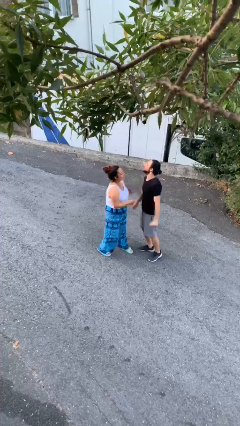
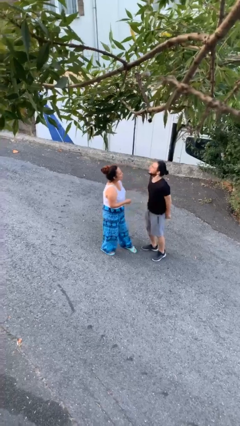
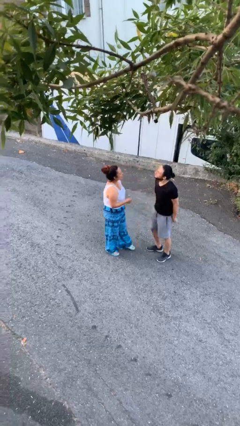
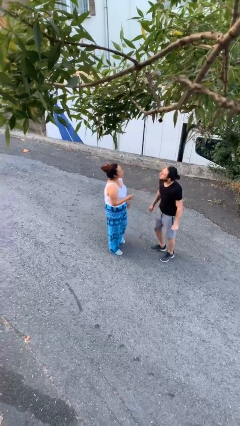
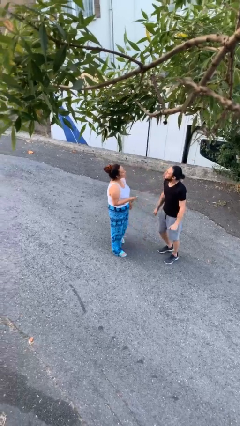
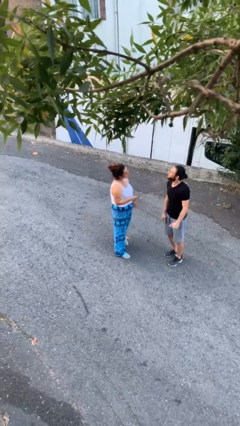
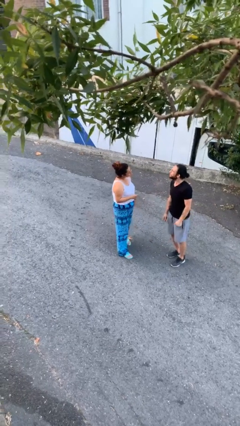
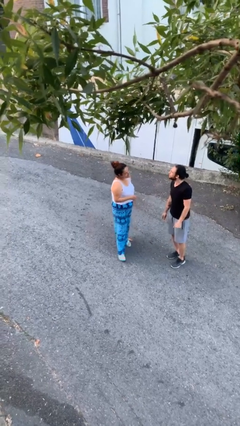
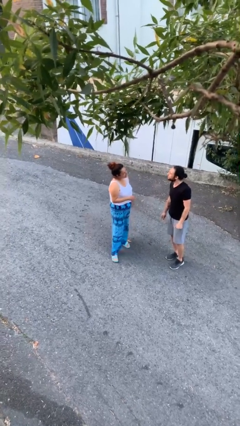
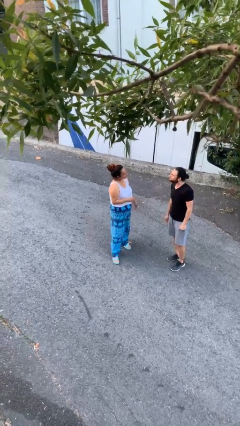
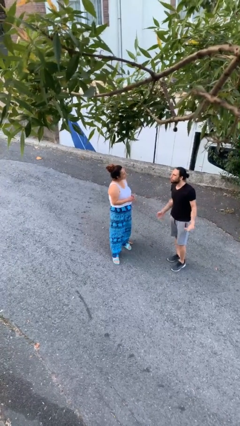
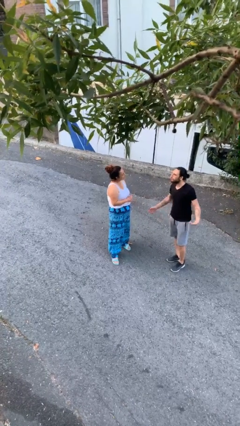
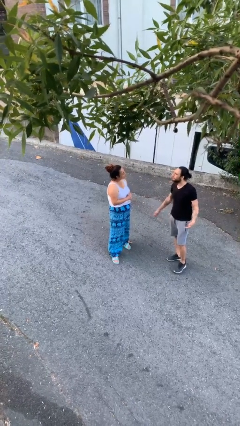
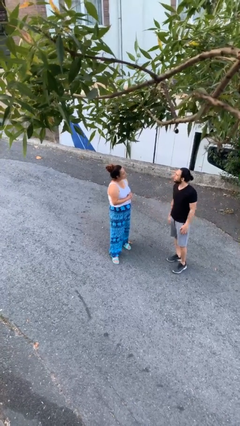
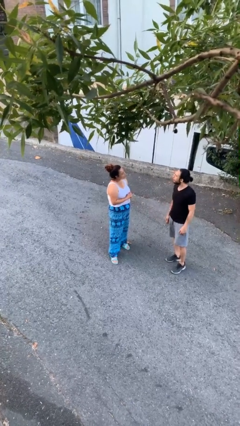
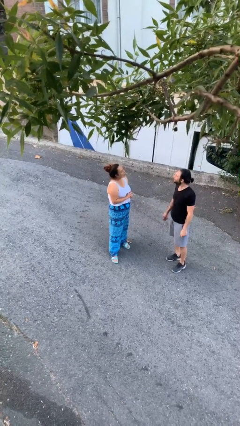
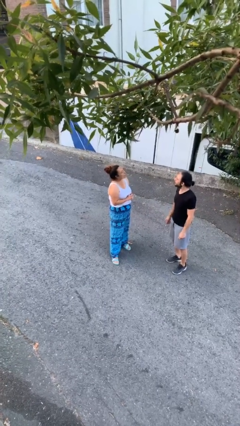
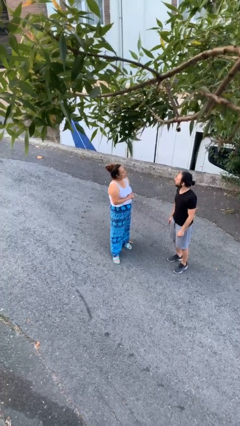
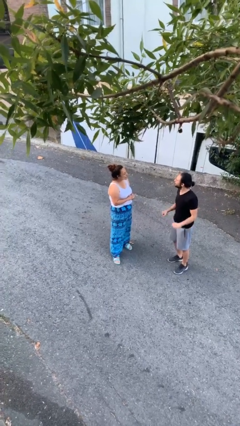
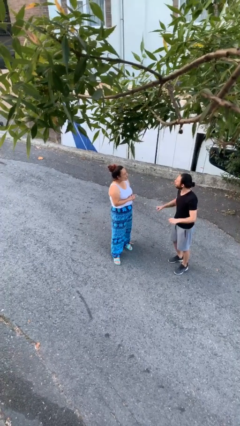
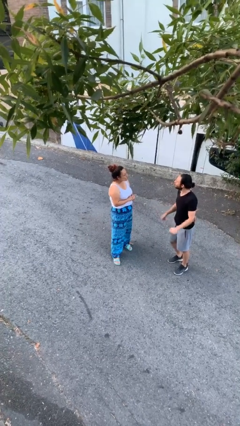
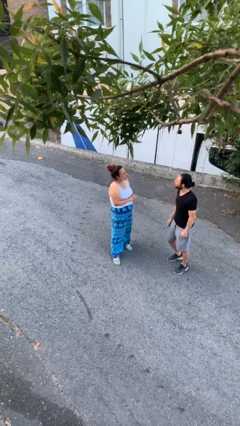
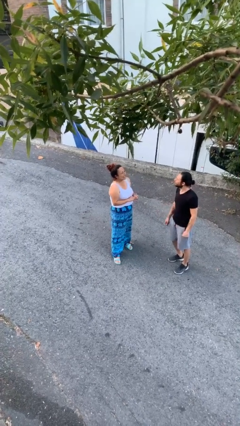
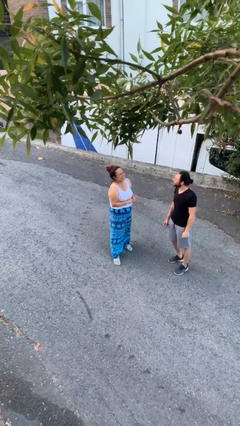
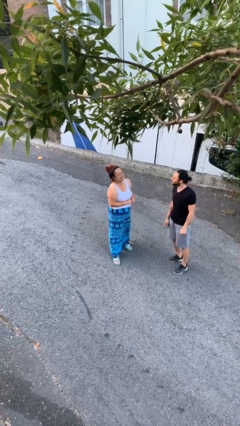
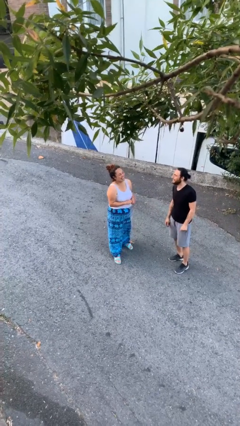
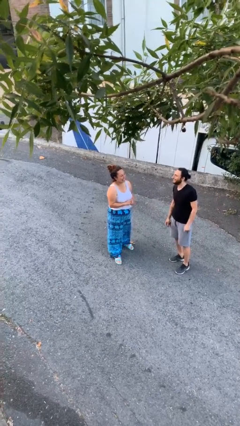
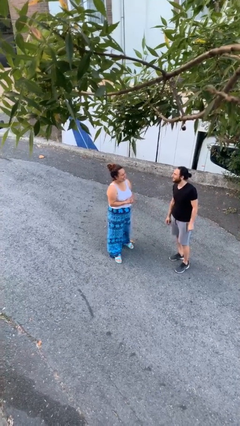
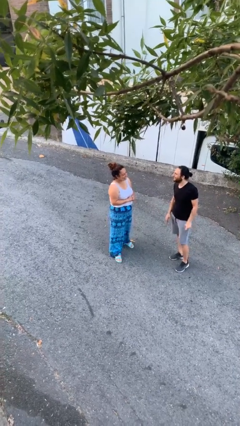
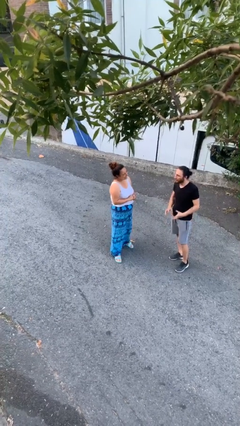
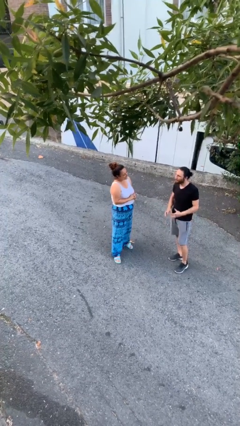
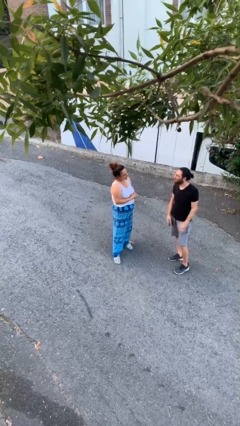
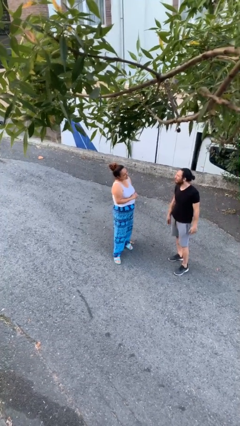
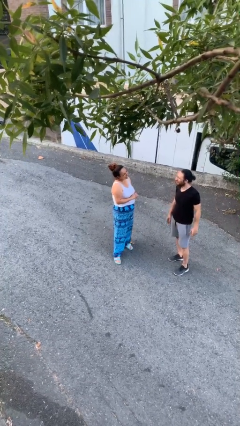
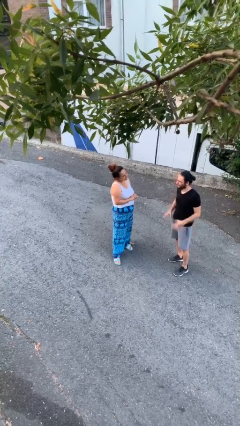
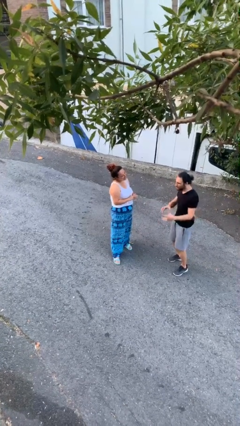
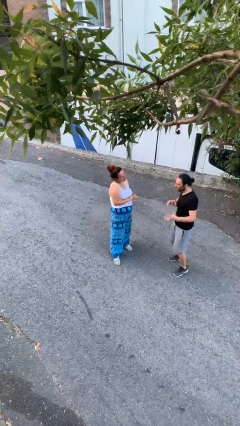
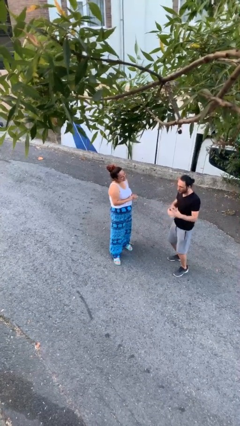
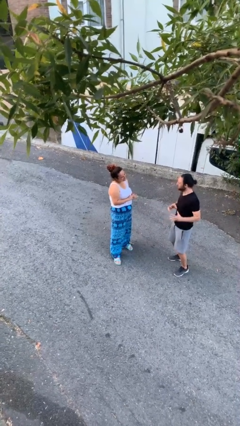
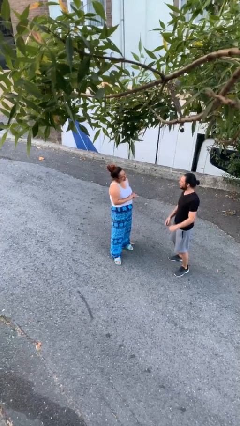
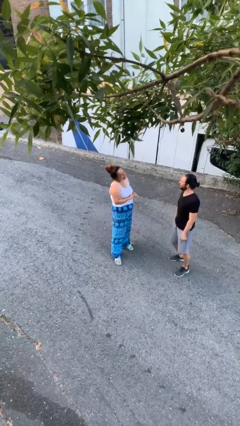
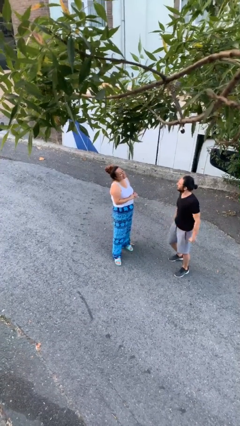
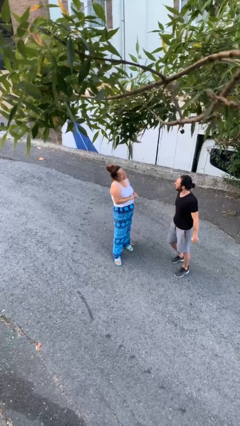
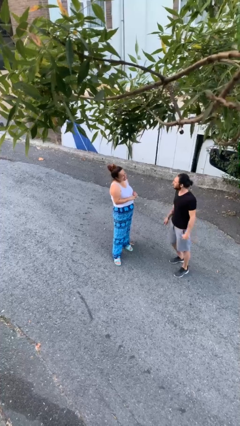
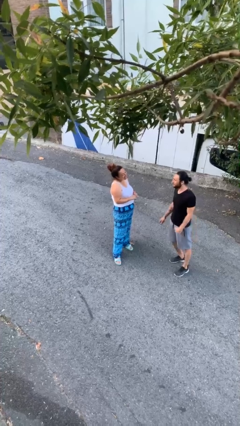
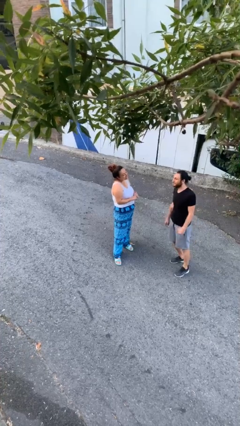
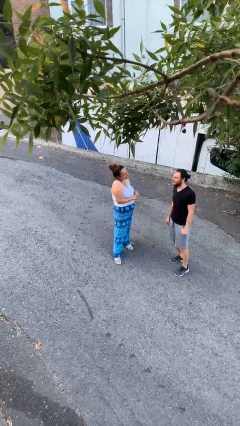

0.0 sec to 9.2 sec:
person talks to person

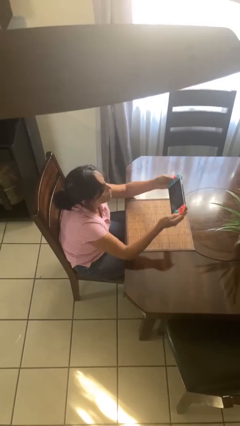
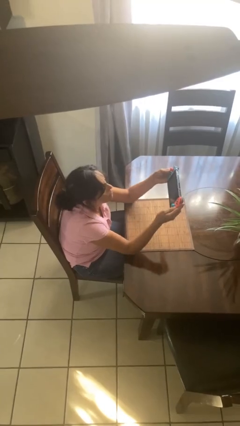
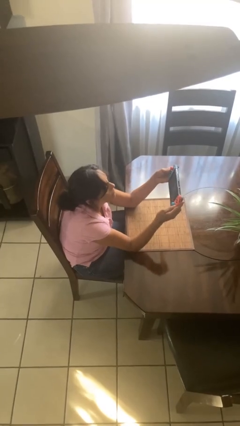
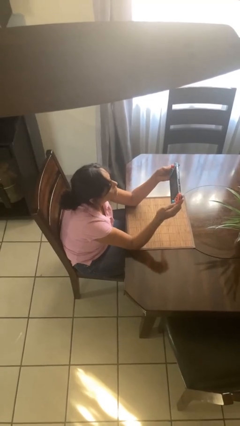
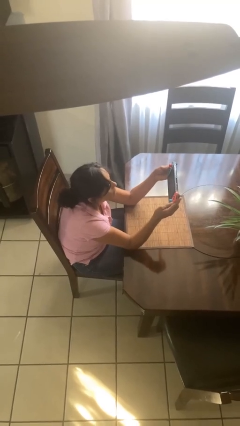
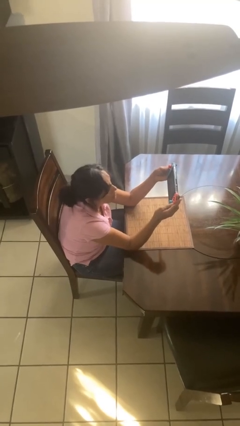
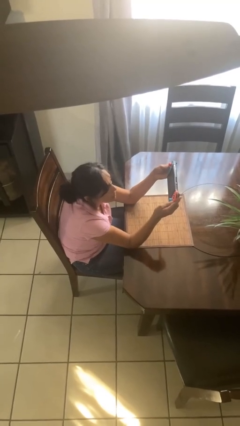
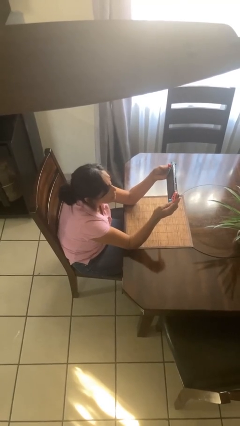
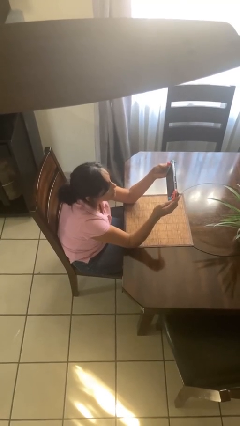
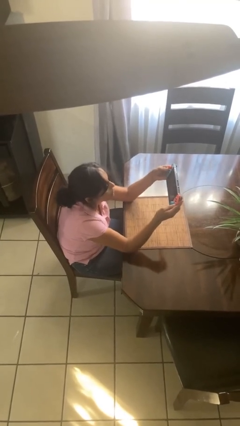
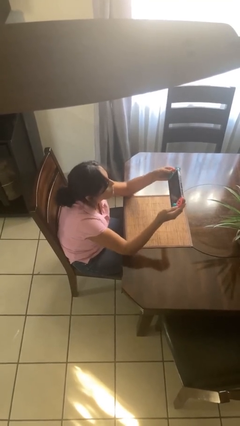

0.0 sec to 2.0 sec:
person interacts with handheld game

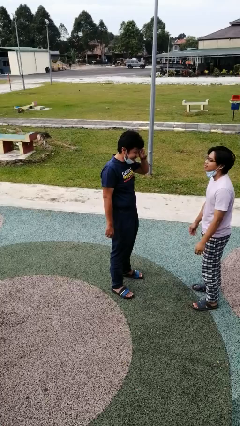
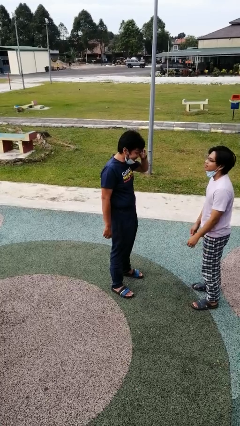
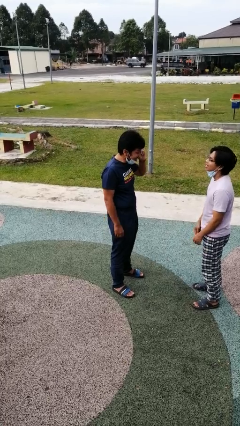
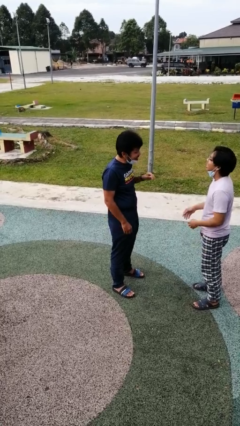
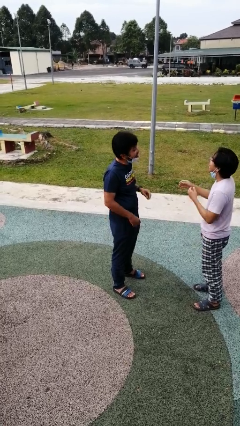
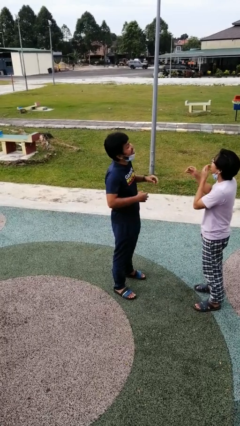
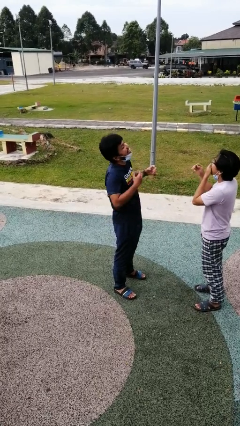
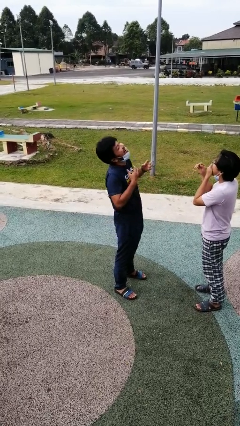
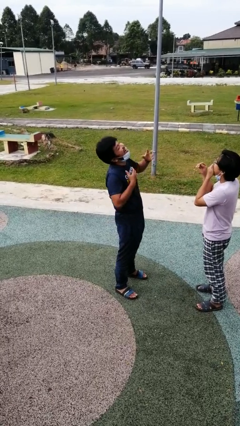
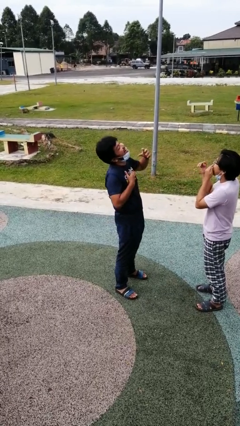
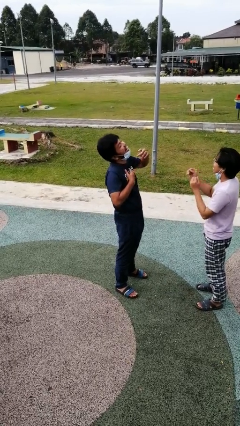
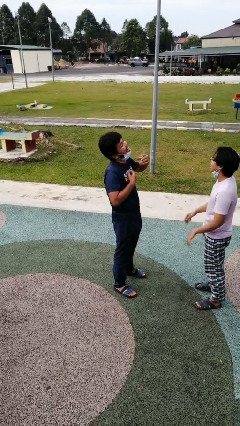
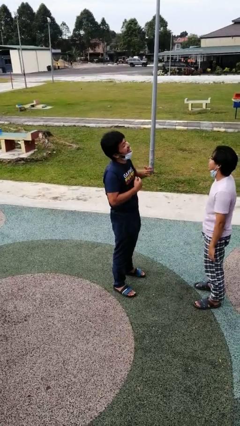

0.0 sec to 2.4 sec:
person laughs with person

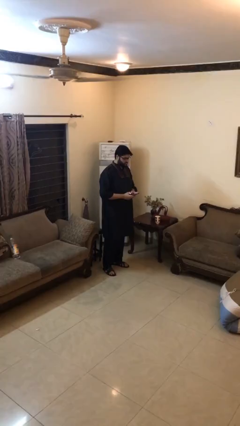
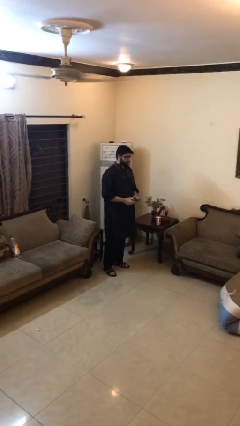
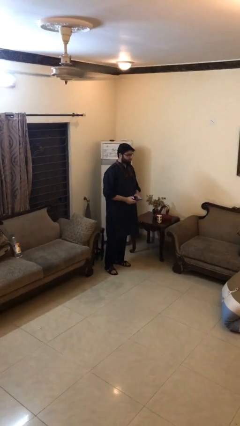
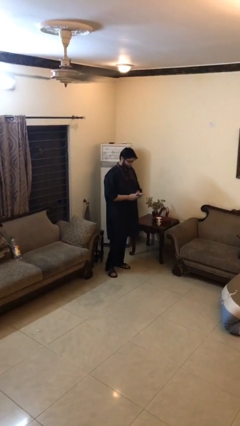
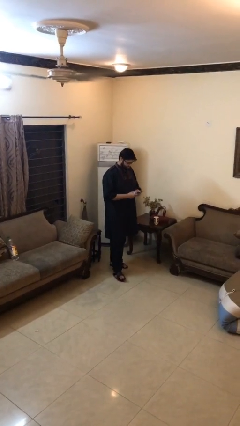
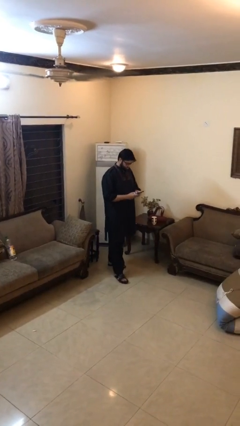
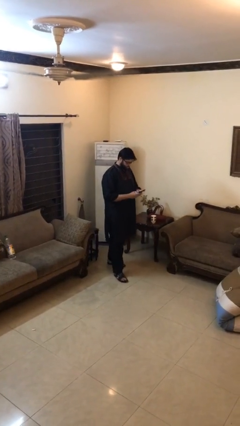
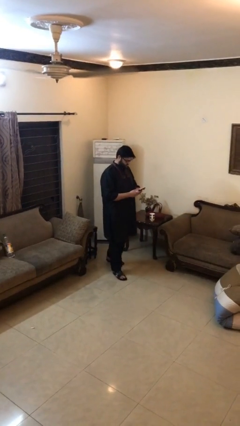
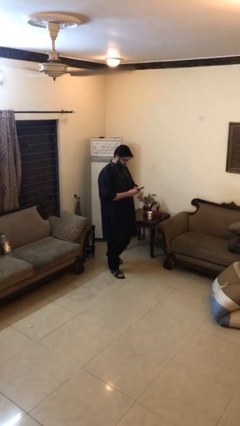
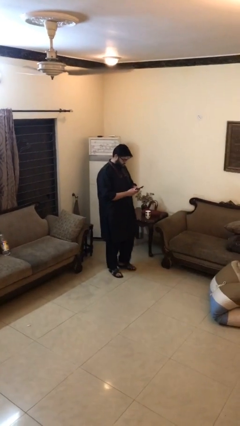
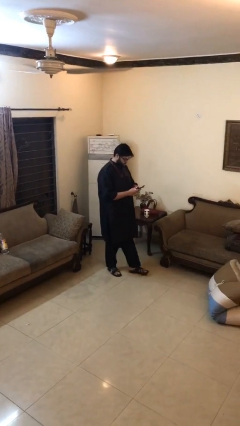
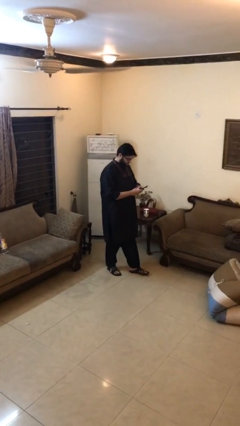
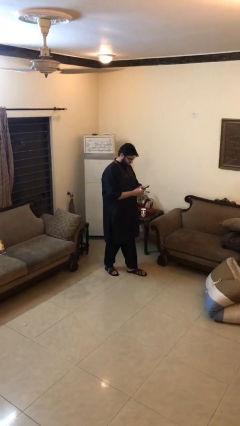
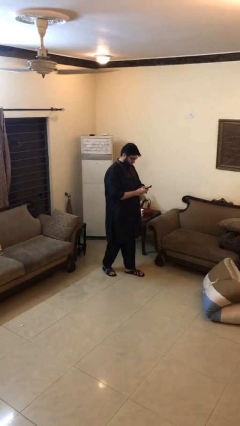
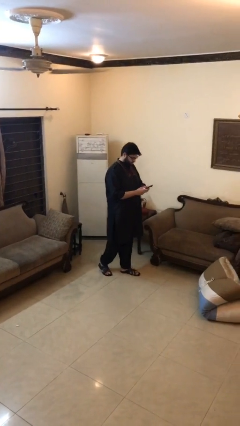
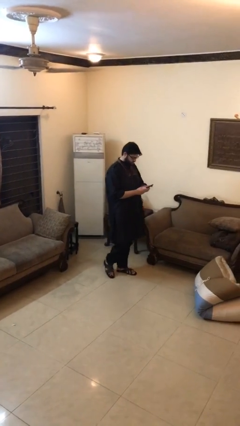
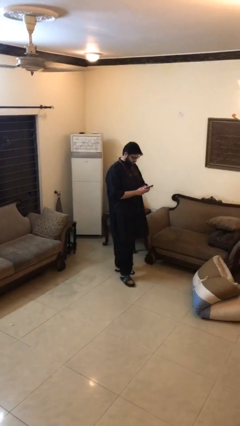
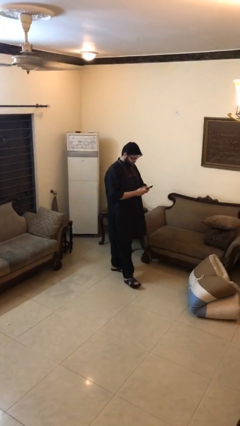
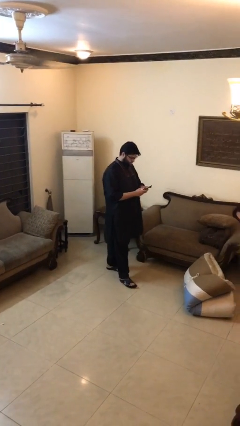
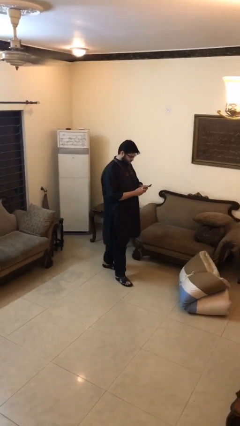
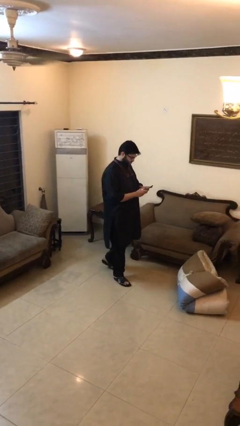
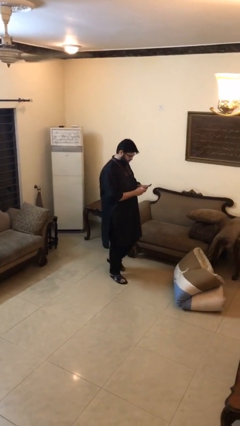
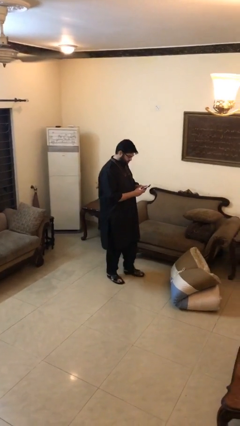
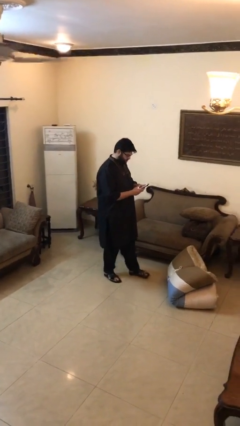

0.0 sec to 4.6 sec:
person texts on phone
